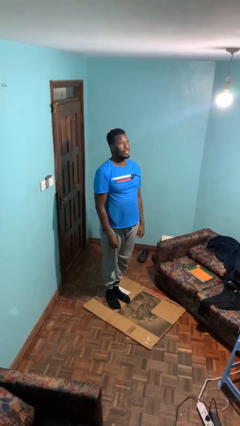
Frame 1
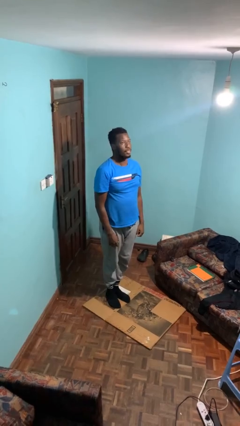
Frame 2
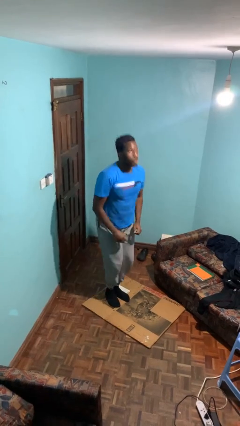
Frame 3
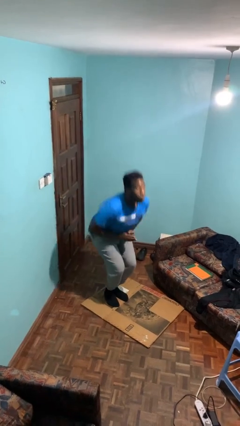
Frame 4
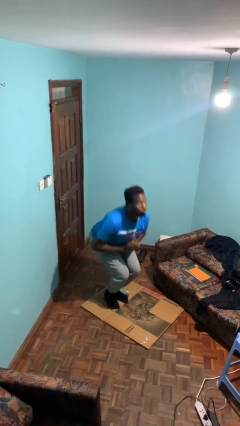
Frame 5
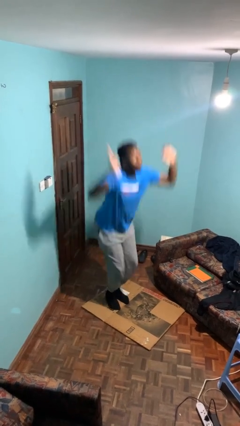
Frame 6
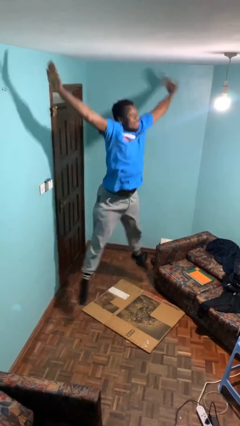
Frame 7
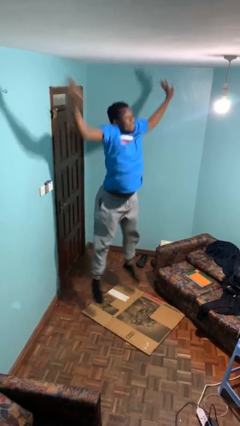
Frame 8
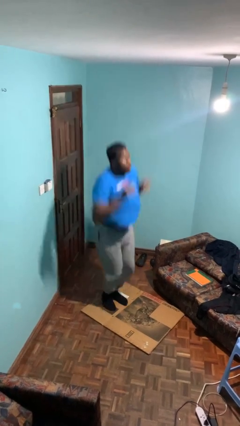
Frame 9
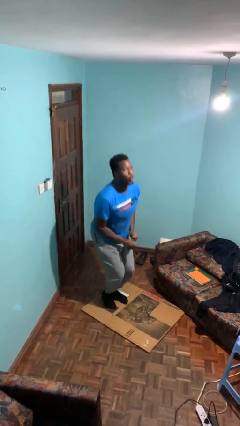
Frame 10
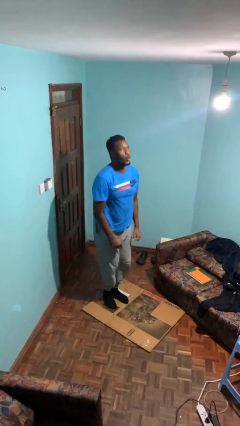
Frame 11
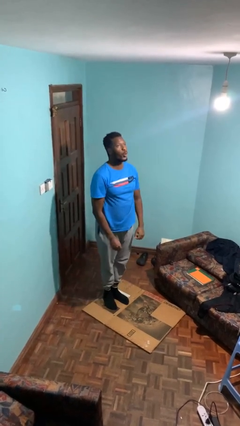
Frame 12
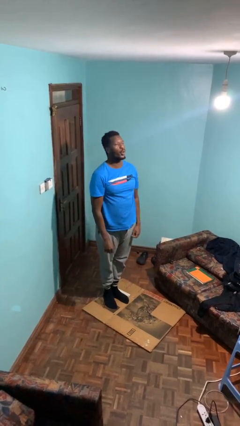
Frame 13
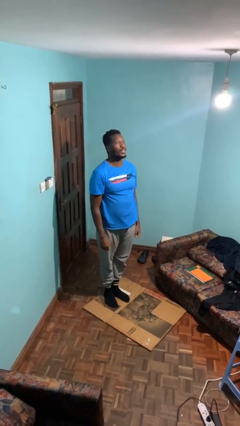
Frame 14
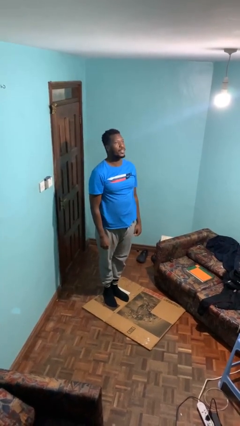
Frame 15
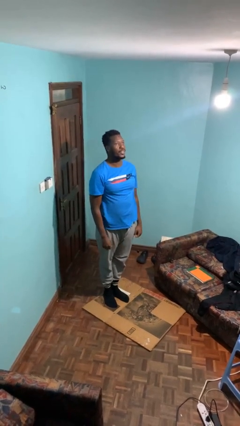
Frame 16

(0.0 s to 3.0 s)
person exercises with jumping jacks

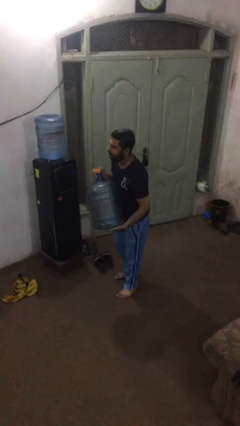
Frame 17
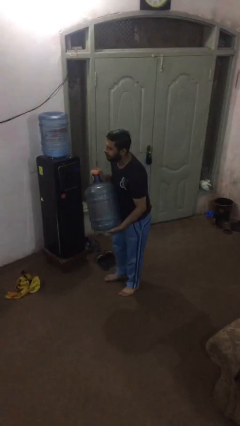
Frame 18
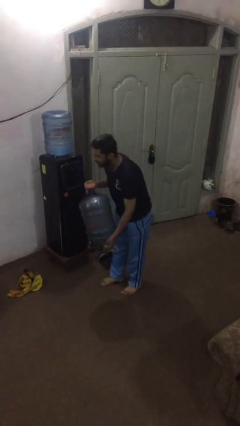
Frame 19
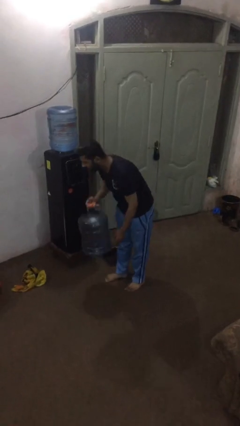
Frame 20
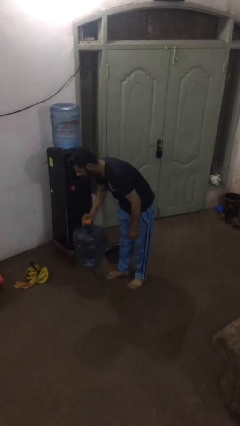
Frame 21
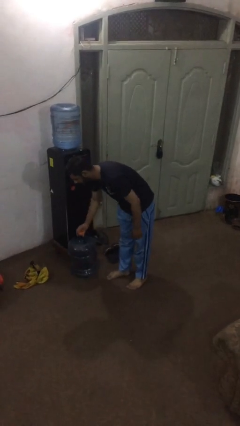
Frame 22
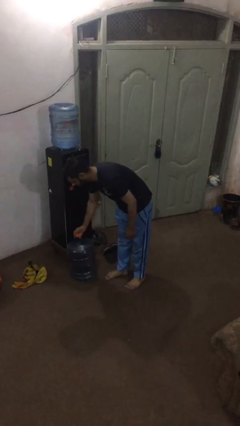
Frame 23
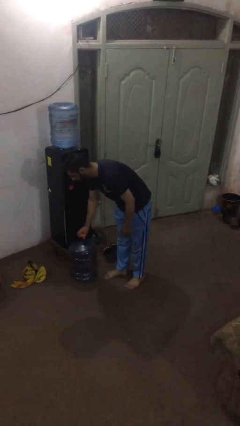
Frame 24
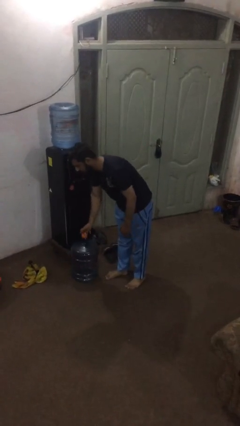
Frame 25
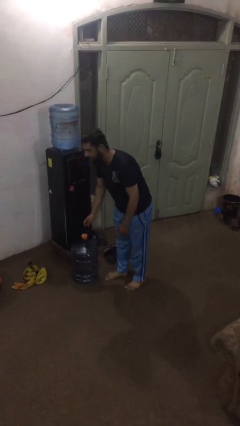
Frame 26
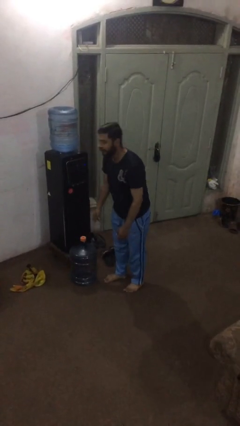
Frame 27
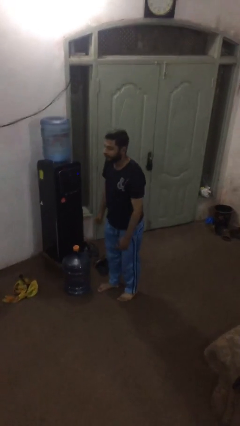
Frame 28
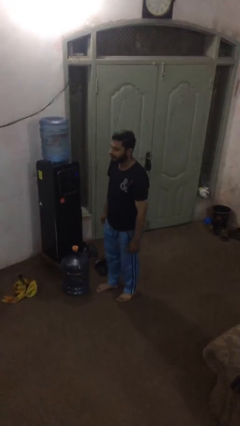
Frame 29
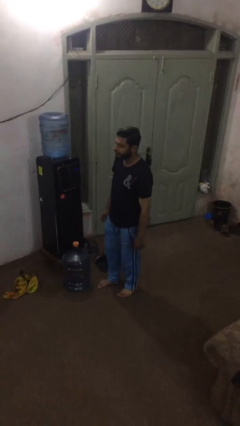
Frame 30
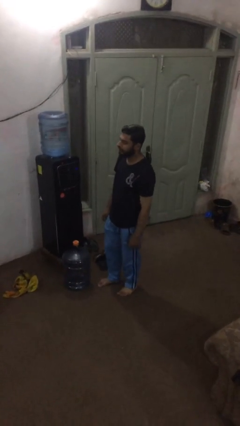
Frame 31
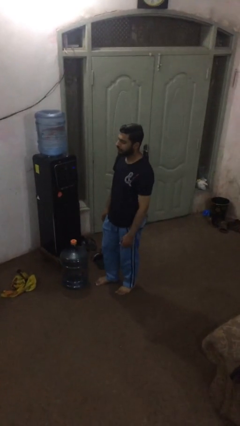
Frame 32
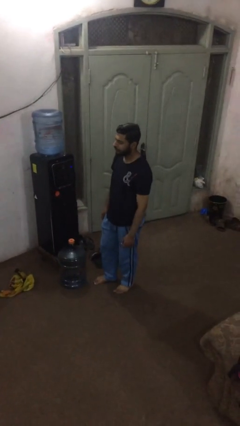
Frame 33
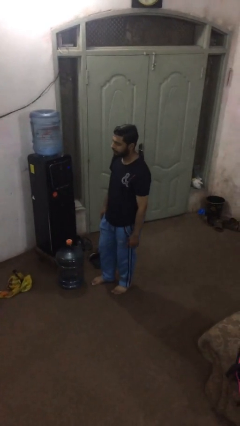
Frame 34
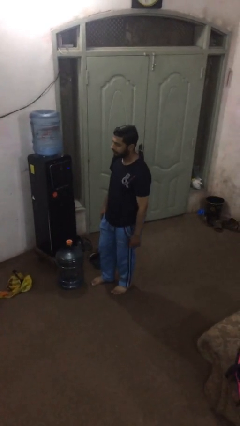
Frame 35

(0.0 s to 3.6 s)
person puts down object on floor

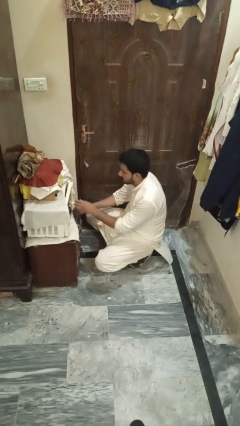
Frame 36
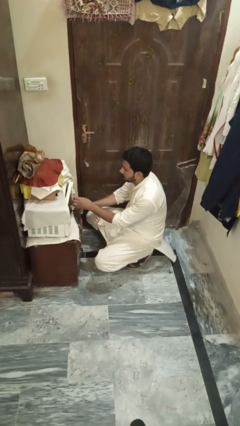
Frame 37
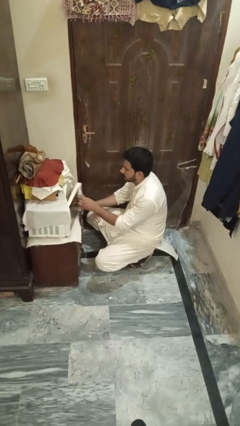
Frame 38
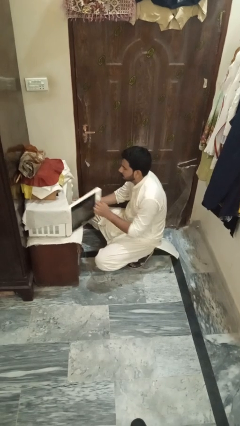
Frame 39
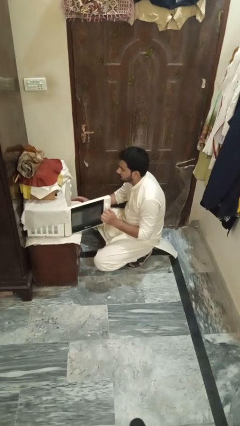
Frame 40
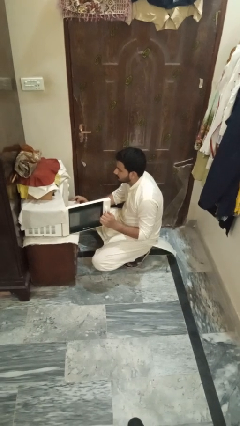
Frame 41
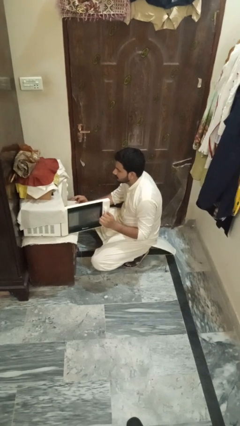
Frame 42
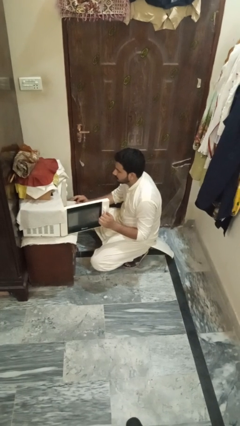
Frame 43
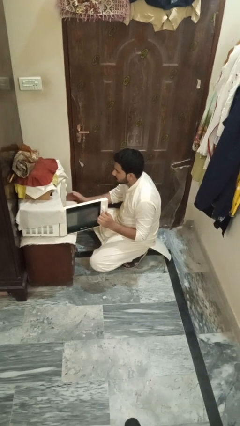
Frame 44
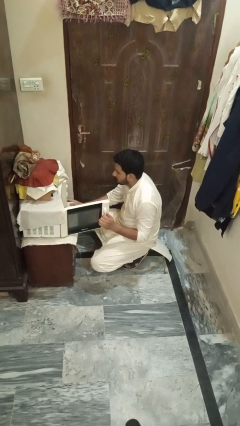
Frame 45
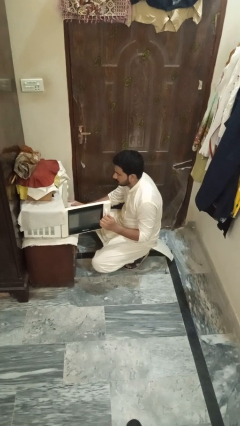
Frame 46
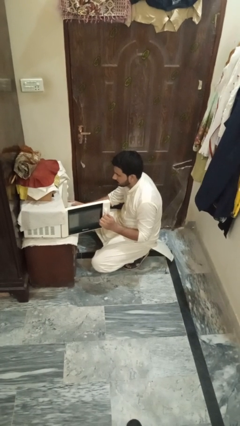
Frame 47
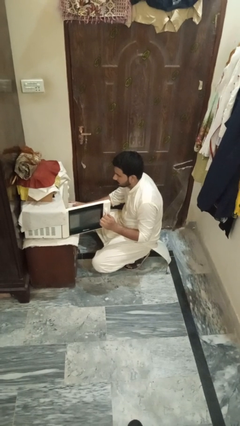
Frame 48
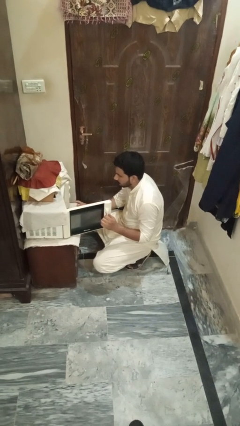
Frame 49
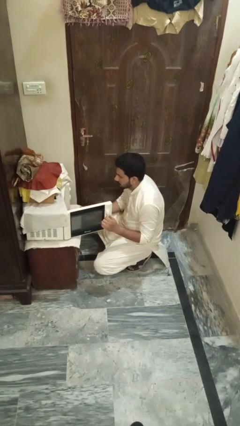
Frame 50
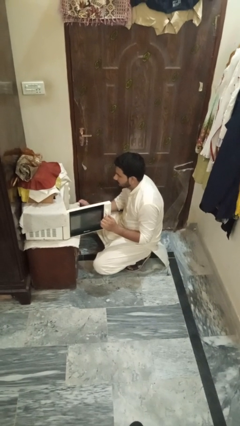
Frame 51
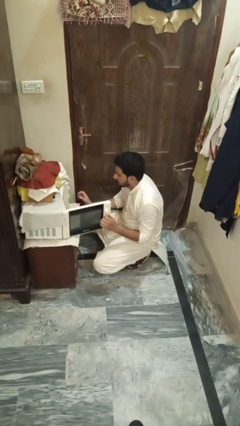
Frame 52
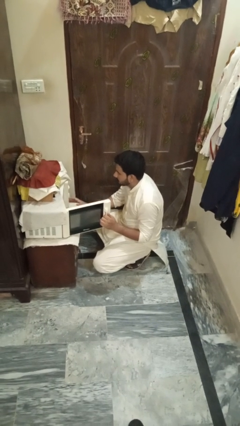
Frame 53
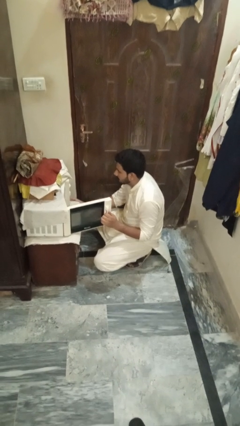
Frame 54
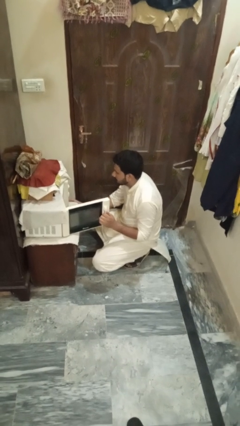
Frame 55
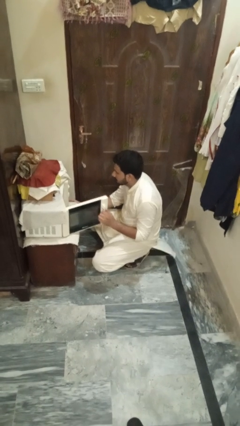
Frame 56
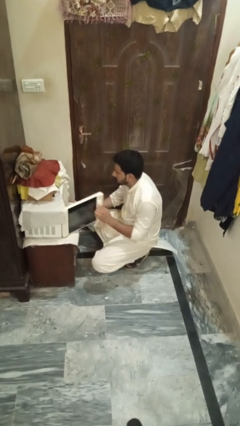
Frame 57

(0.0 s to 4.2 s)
person opens microwave

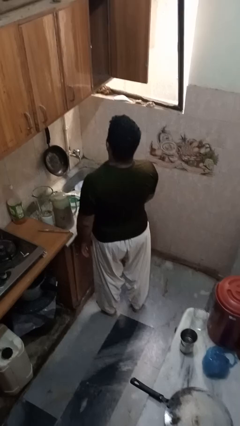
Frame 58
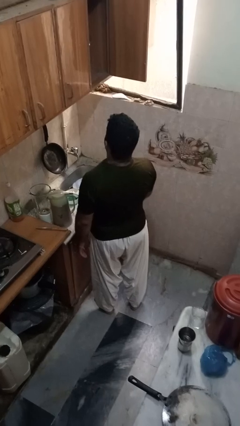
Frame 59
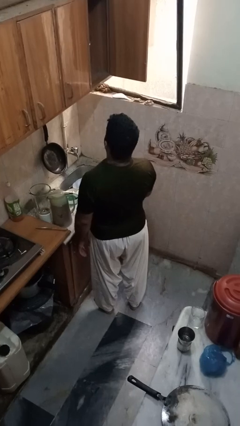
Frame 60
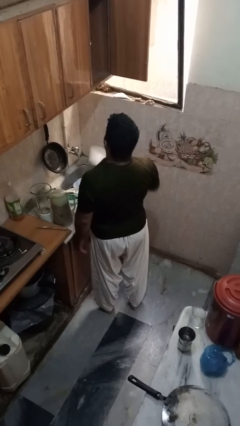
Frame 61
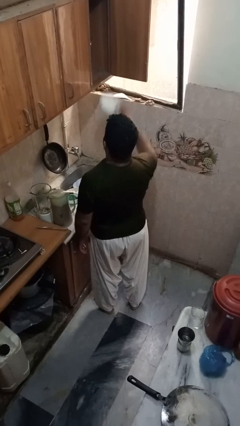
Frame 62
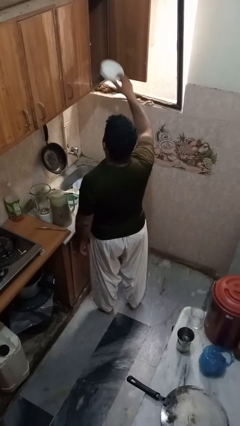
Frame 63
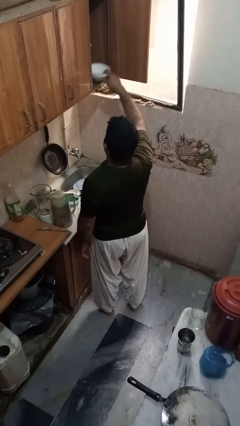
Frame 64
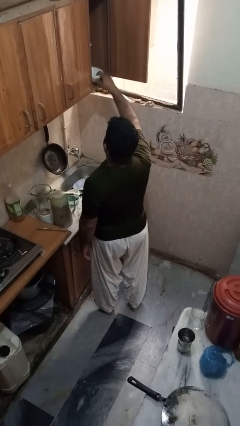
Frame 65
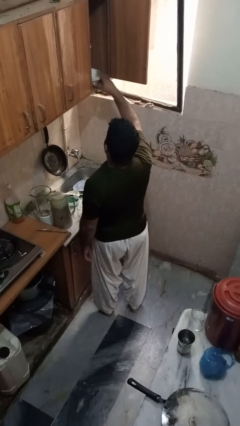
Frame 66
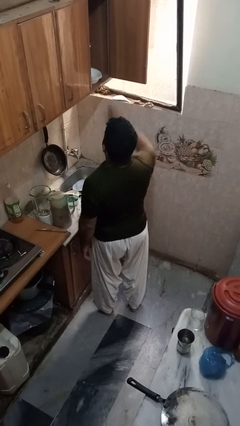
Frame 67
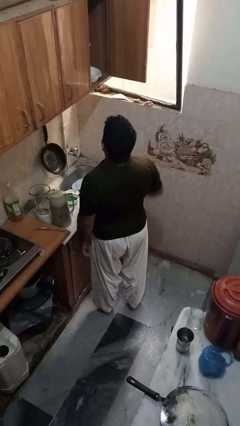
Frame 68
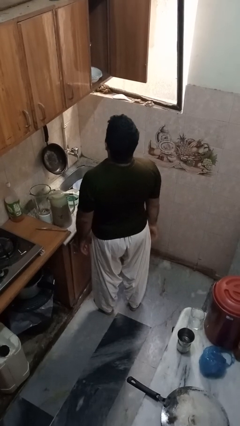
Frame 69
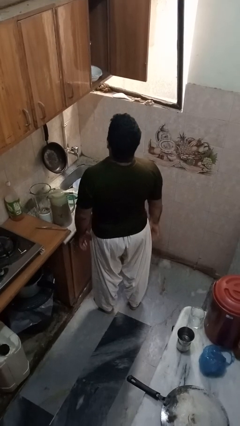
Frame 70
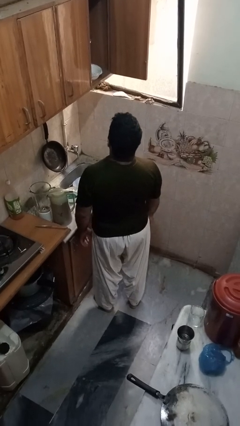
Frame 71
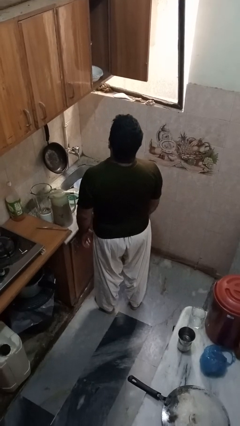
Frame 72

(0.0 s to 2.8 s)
person puts object in cabinet

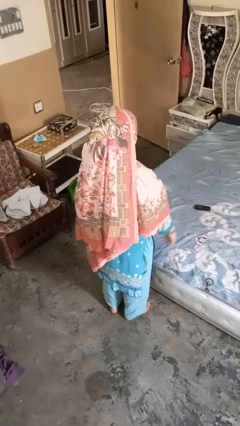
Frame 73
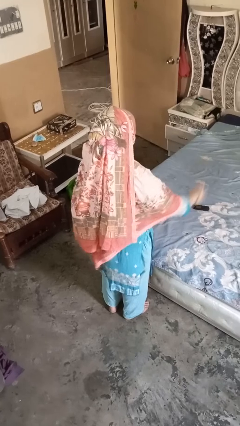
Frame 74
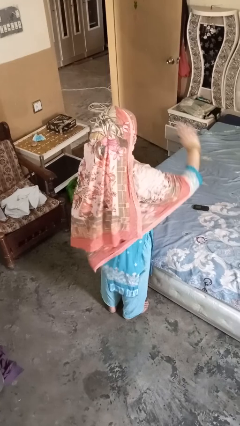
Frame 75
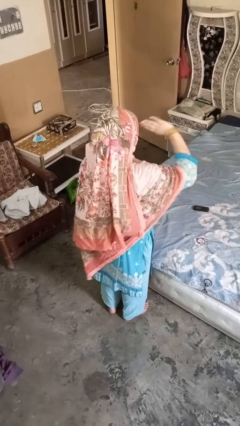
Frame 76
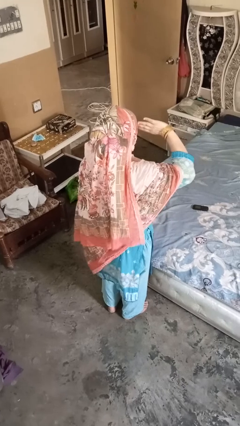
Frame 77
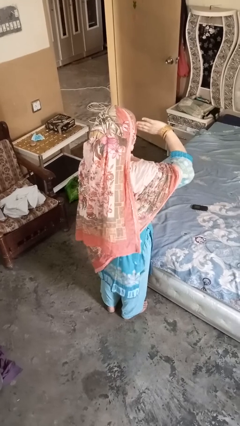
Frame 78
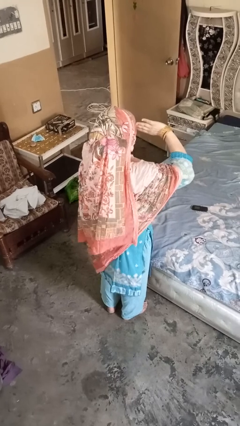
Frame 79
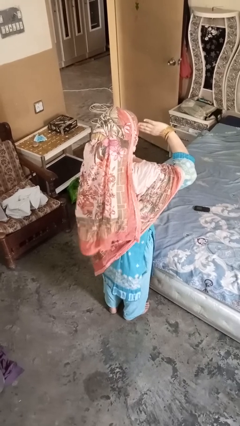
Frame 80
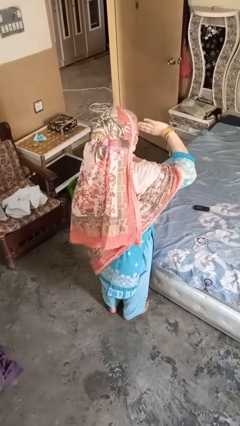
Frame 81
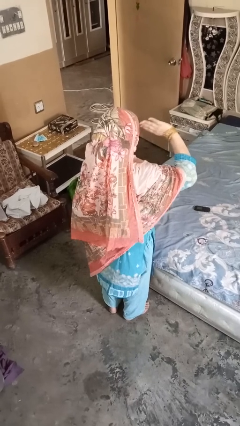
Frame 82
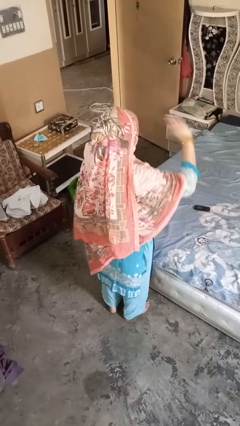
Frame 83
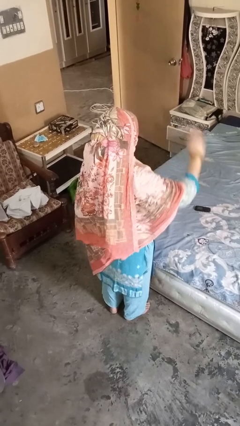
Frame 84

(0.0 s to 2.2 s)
person salutes

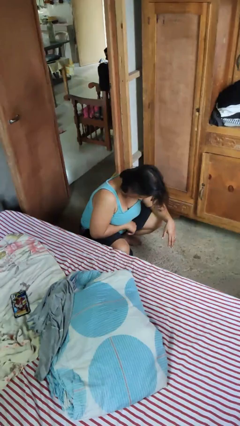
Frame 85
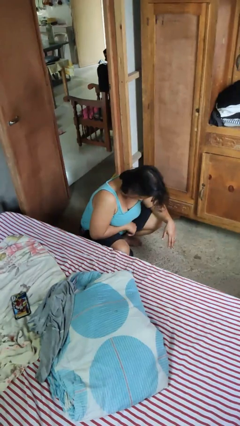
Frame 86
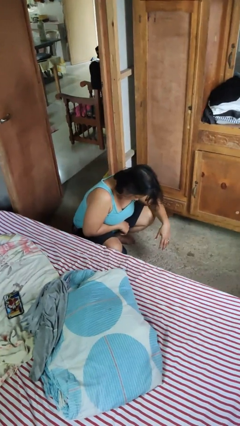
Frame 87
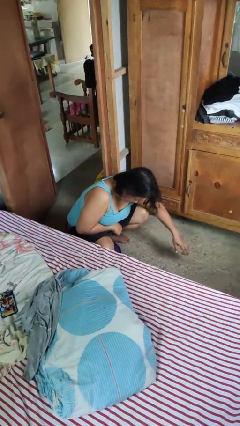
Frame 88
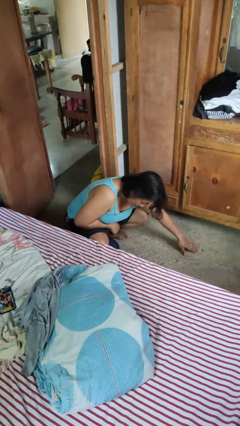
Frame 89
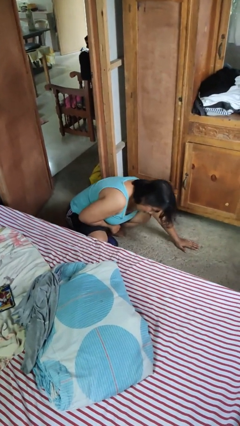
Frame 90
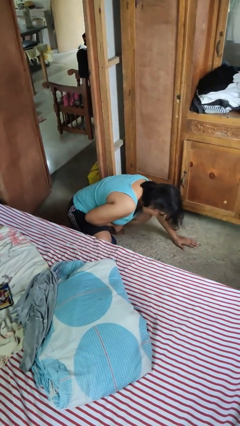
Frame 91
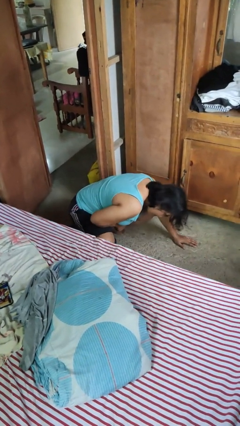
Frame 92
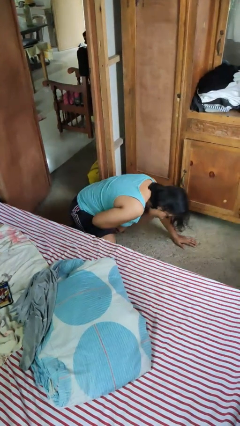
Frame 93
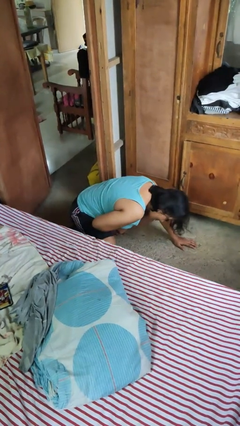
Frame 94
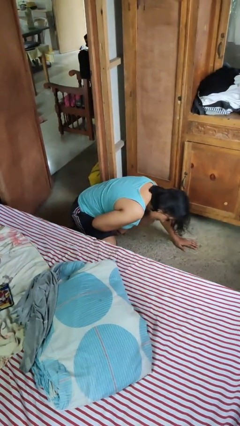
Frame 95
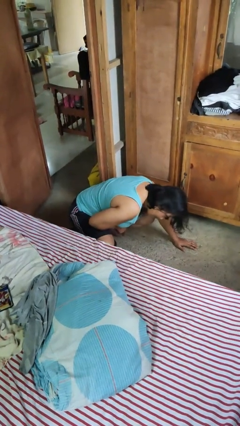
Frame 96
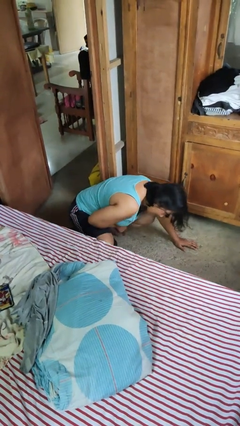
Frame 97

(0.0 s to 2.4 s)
person searches under bed
